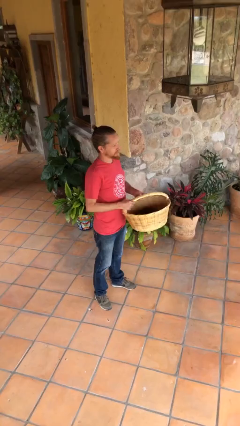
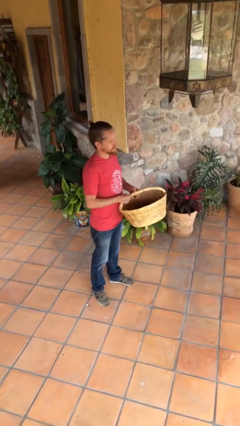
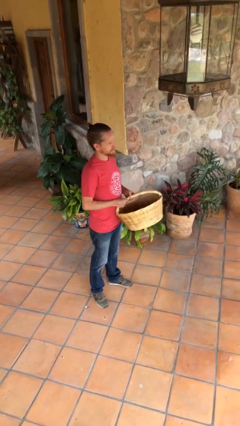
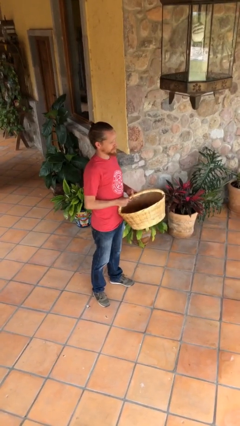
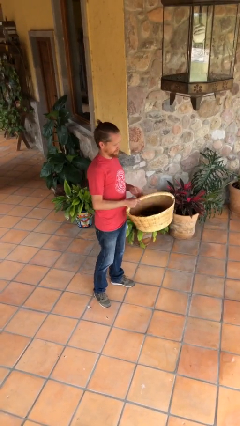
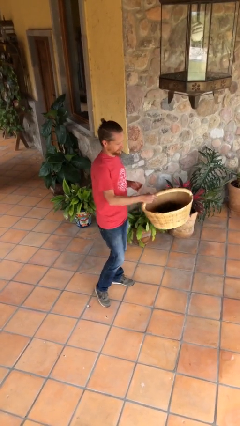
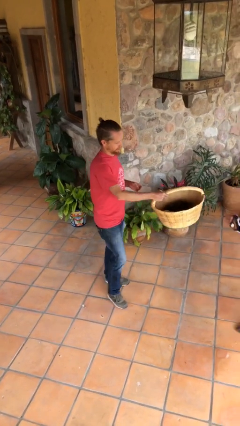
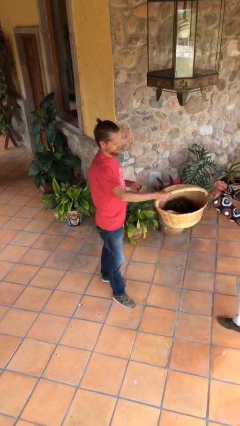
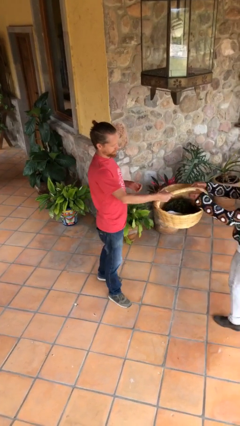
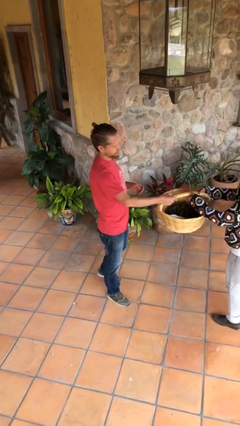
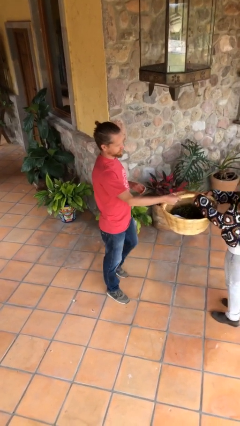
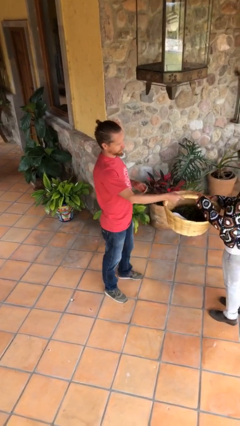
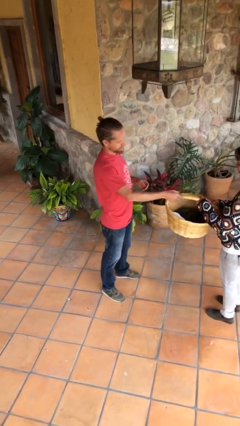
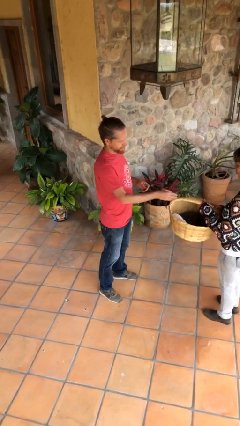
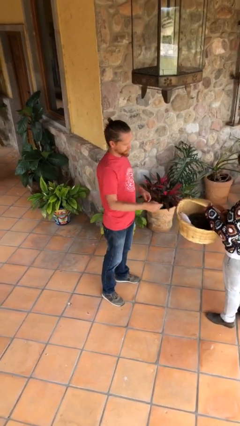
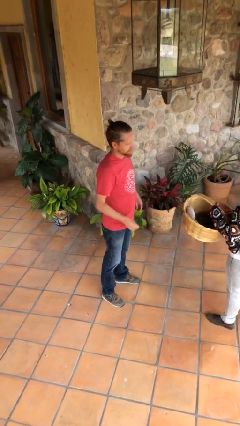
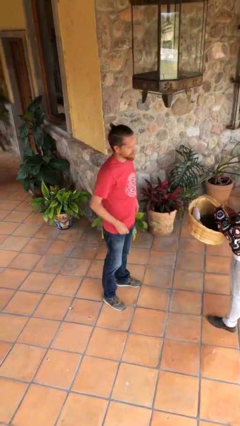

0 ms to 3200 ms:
person transfers object to person

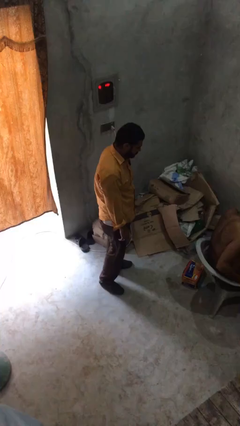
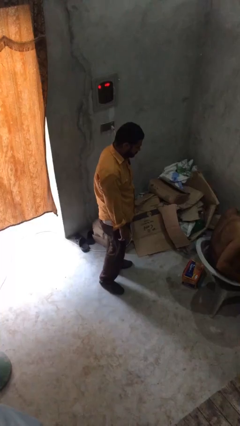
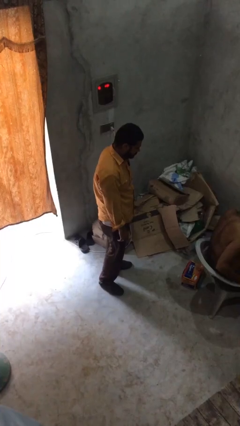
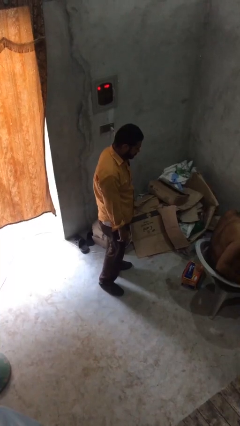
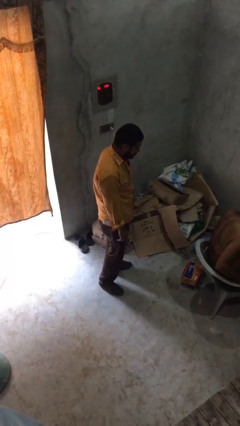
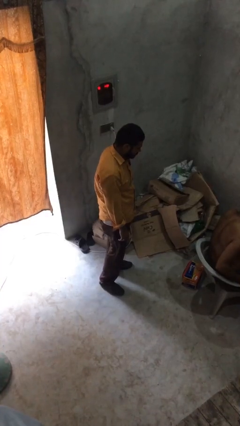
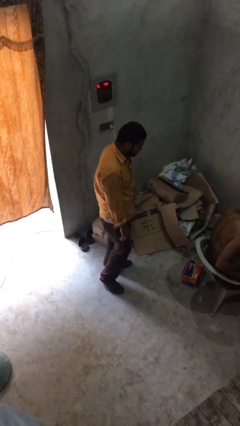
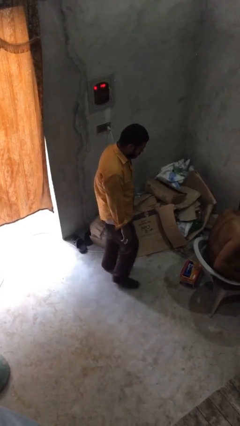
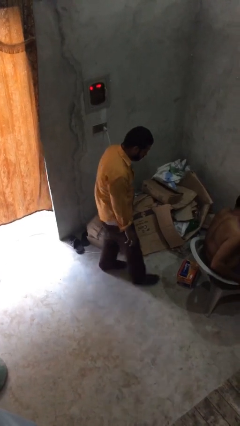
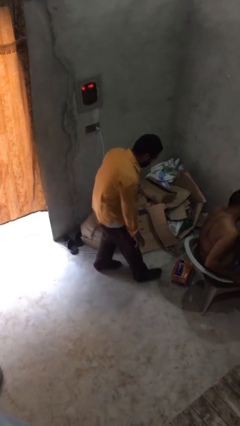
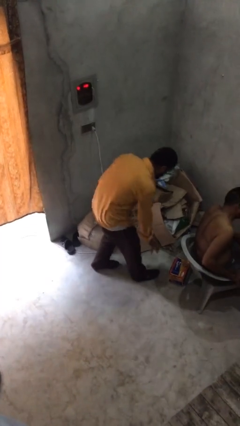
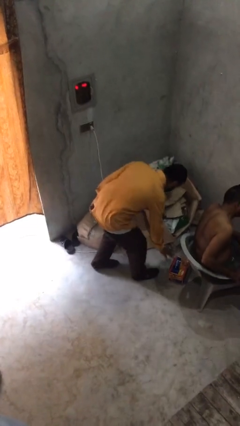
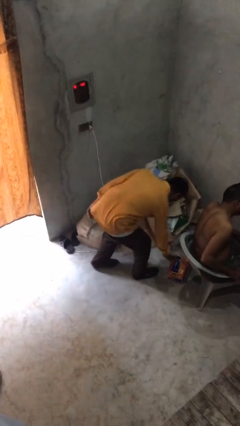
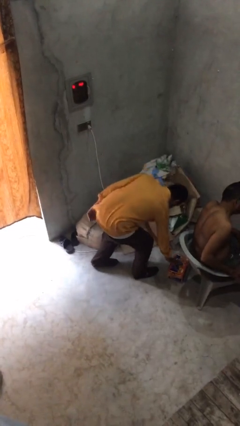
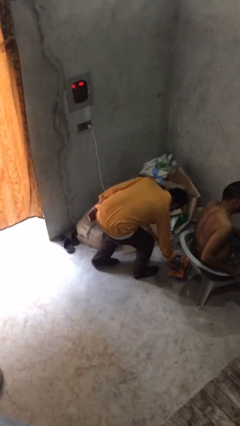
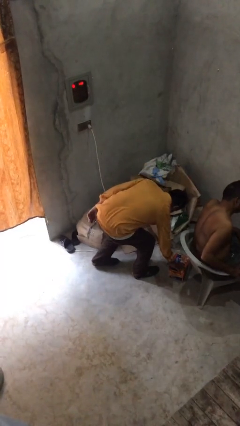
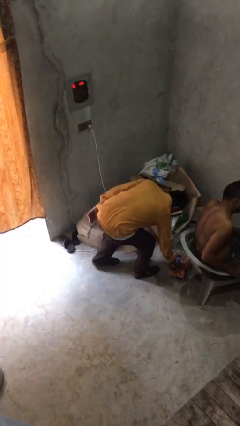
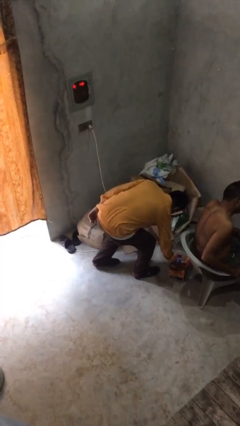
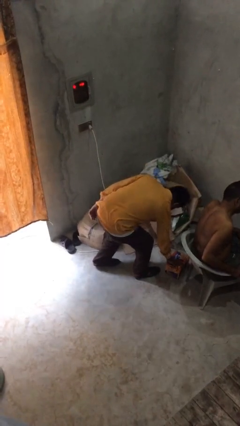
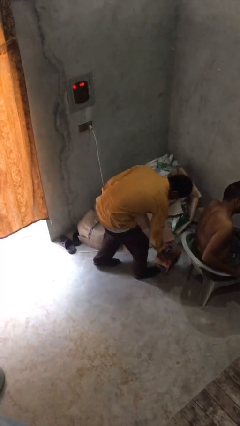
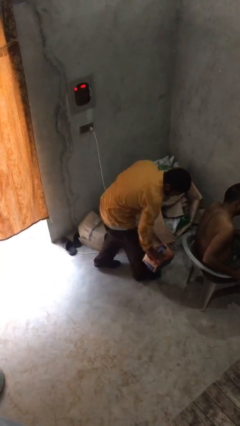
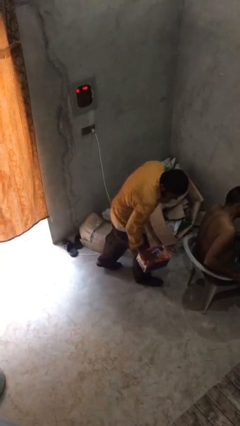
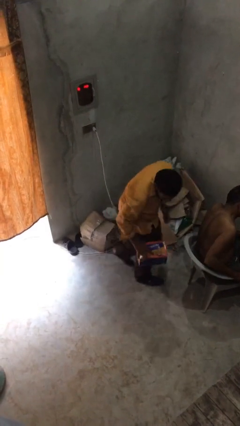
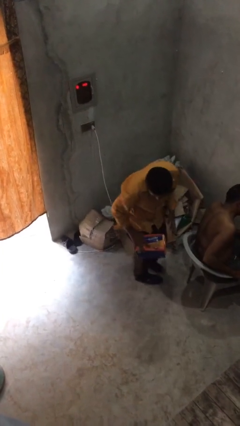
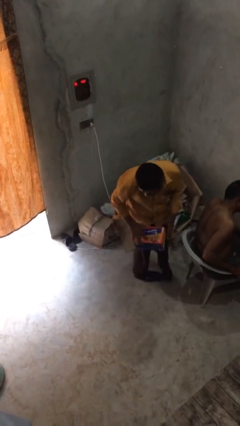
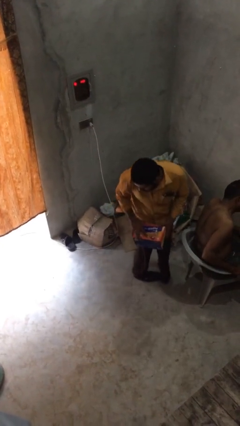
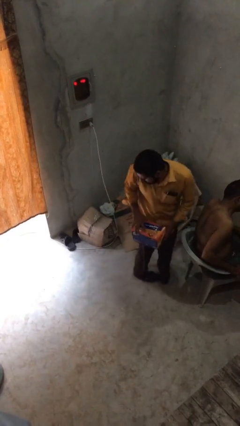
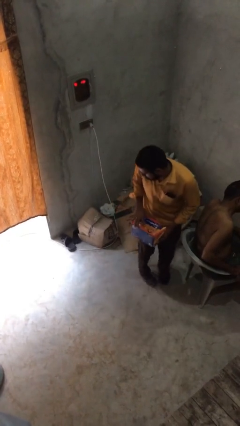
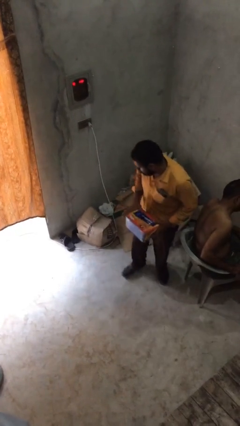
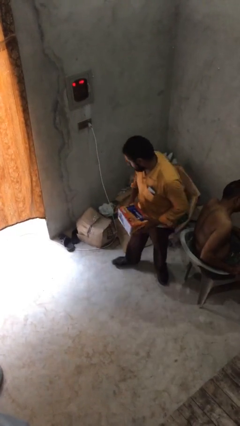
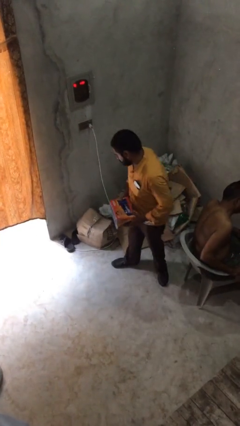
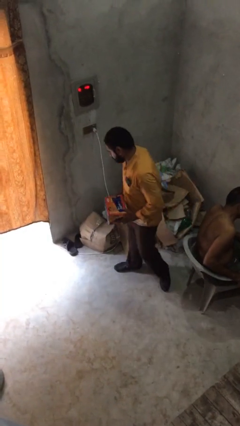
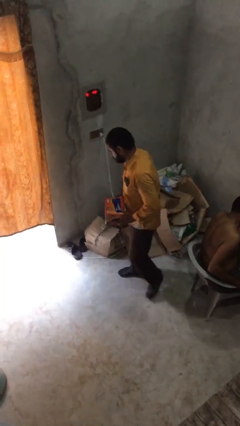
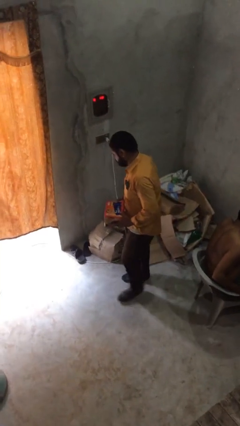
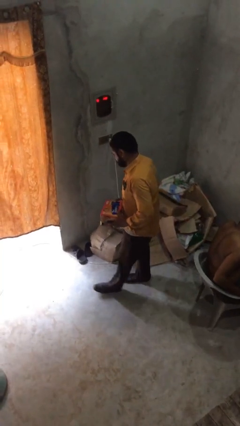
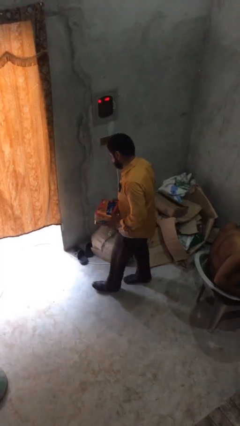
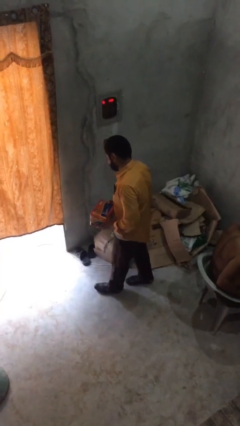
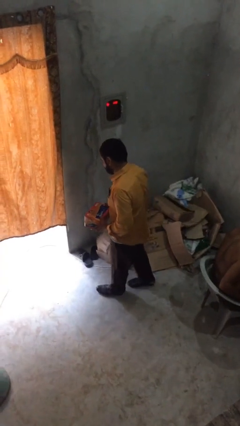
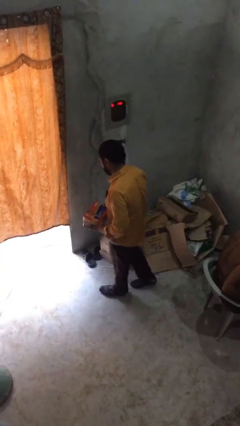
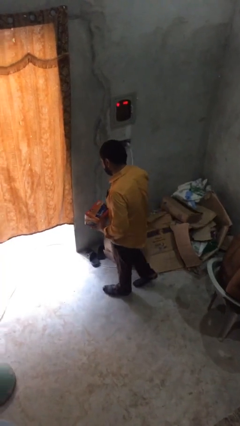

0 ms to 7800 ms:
person steals object from person

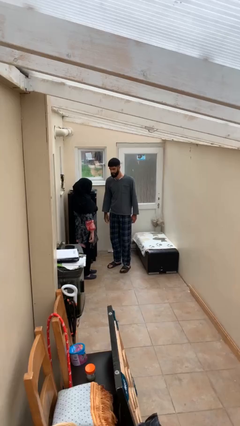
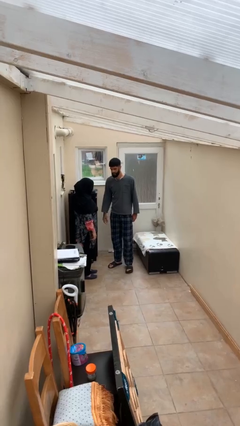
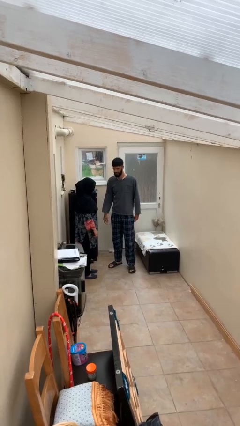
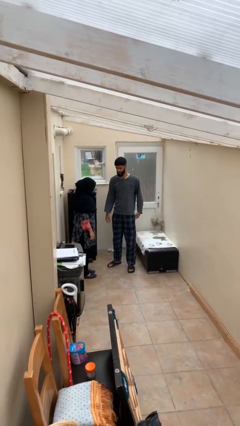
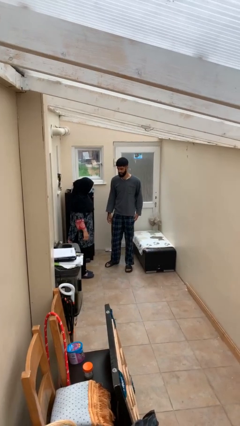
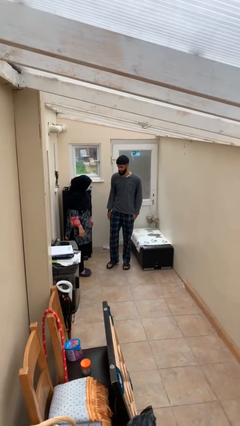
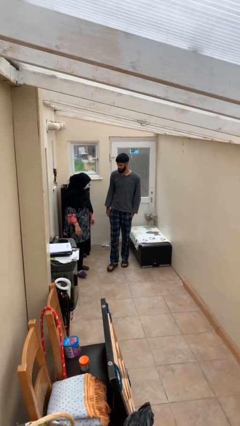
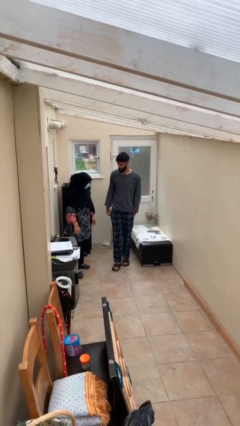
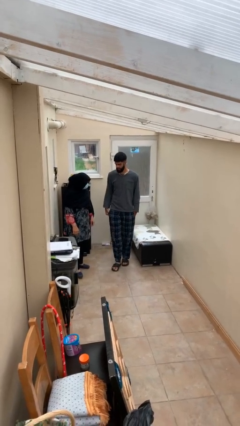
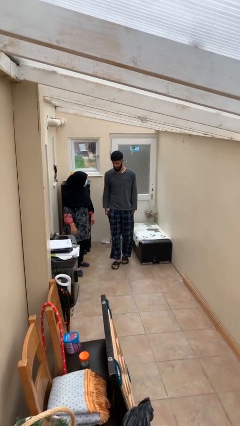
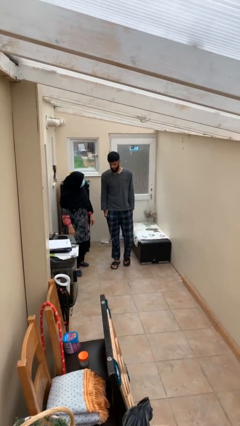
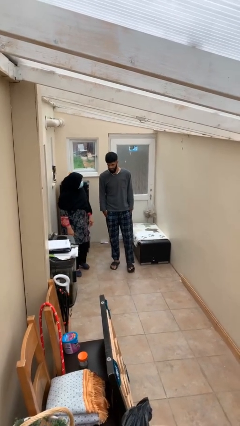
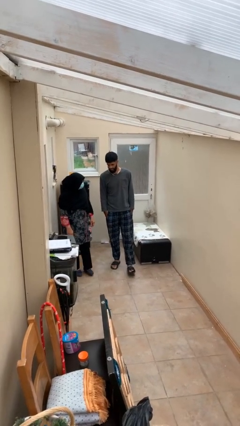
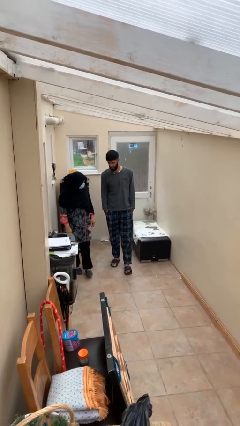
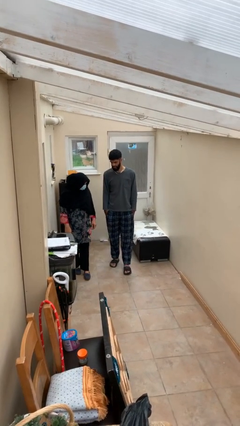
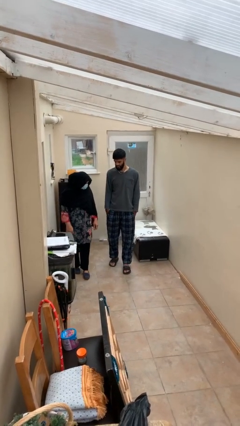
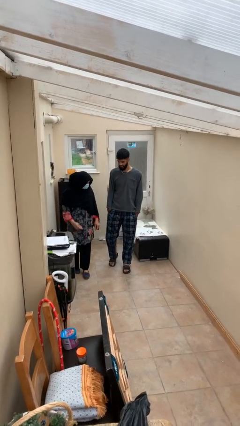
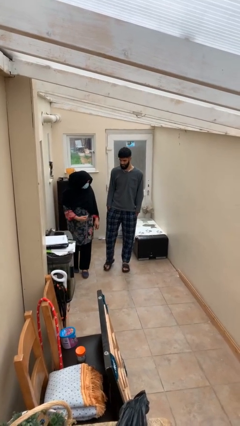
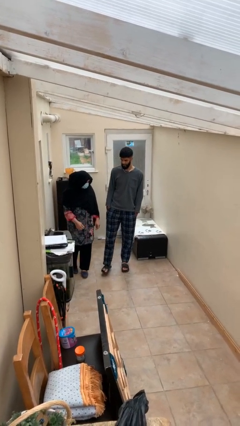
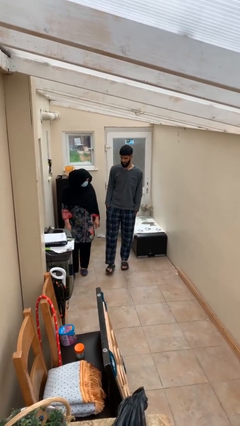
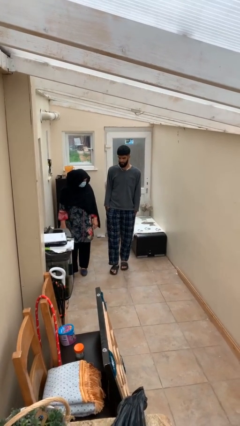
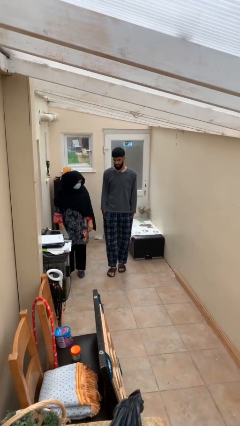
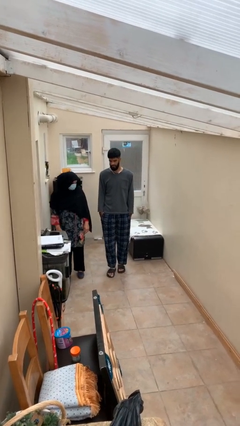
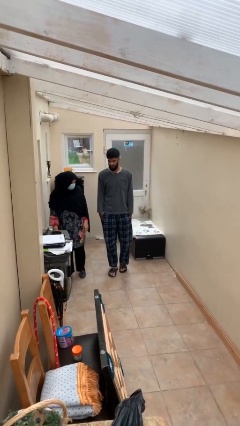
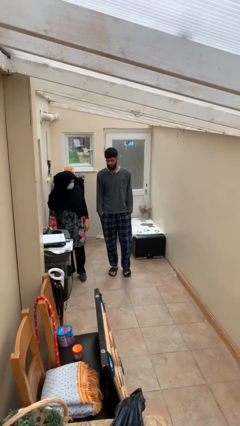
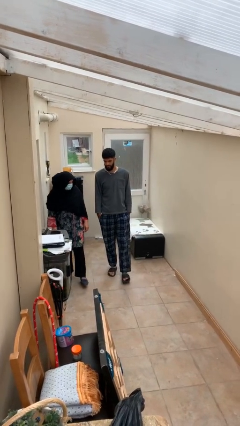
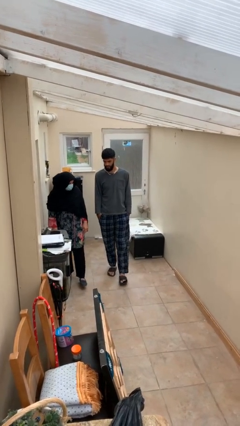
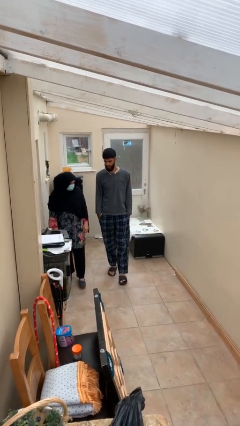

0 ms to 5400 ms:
person talks to person

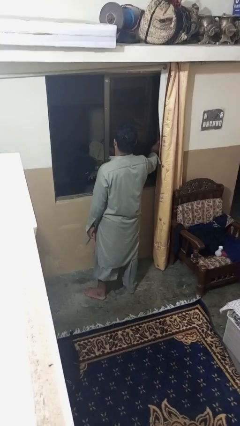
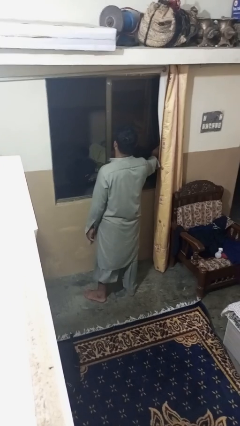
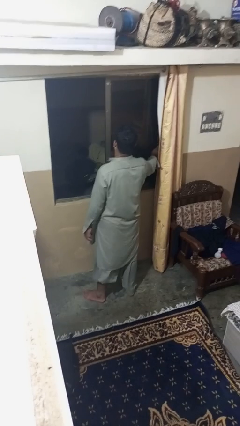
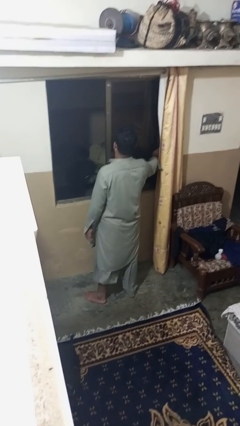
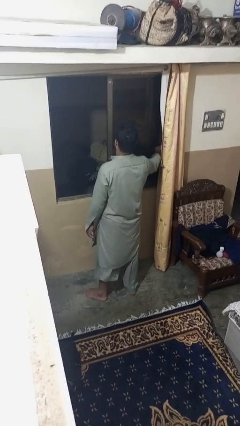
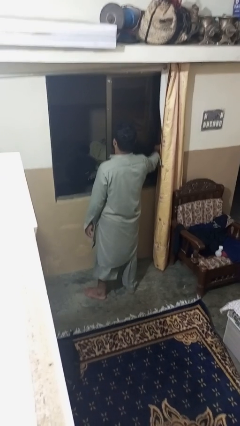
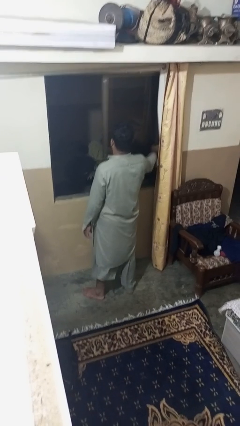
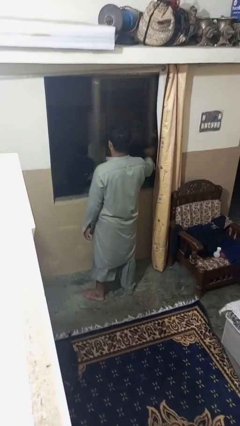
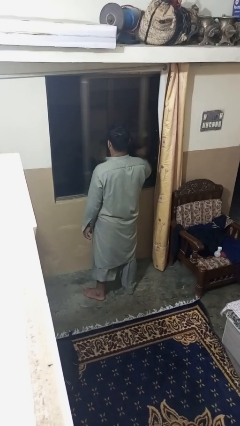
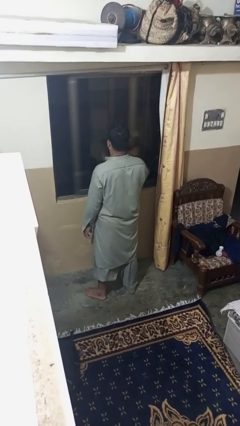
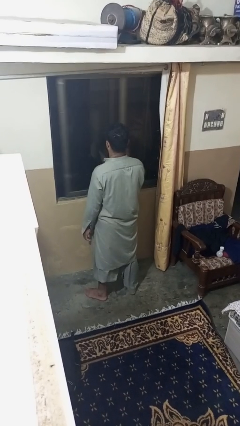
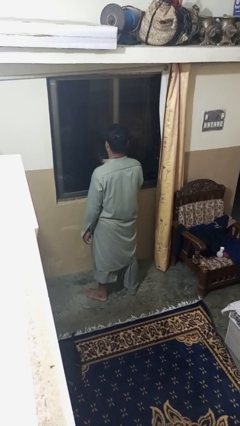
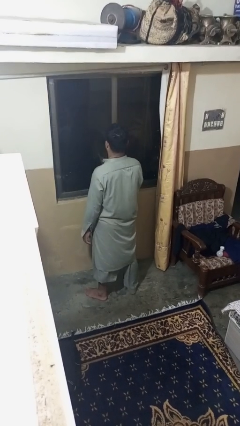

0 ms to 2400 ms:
person closes home window
